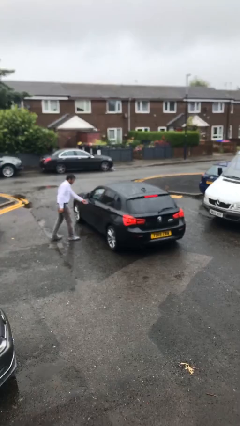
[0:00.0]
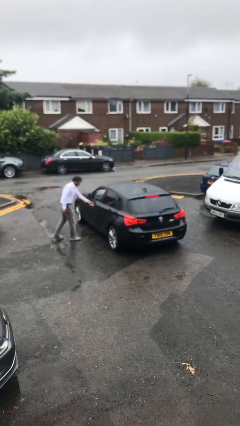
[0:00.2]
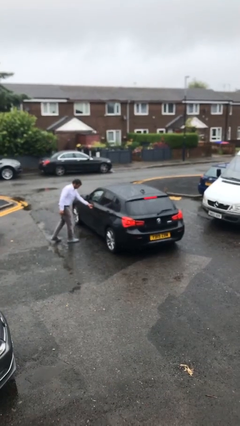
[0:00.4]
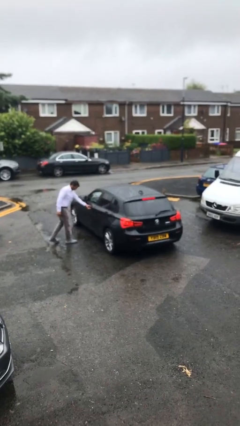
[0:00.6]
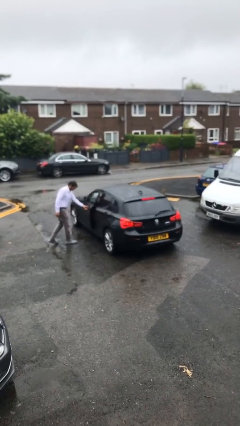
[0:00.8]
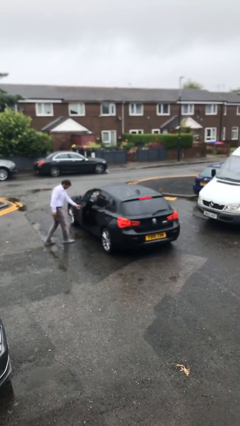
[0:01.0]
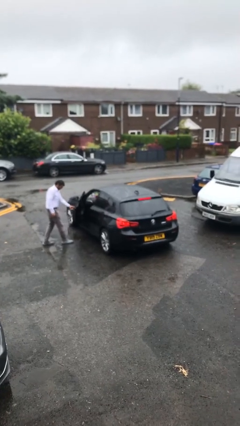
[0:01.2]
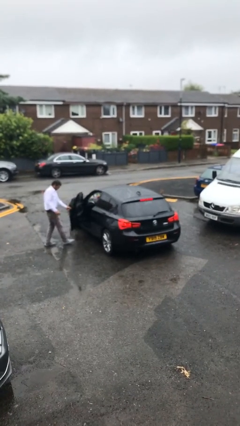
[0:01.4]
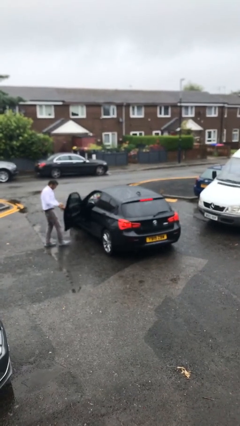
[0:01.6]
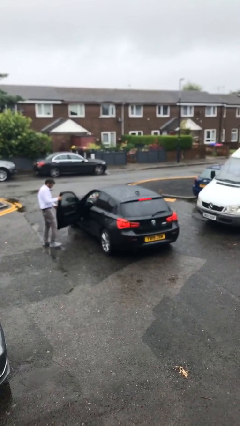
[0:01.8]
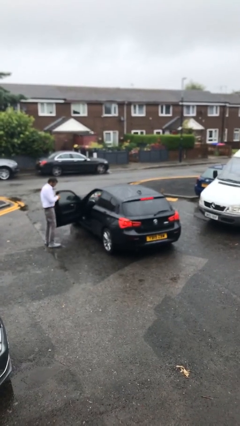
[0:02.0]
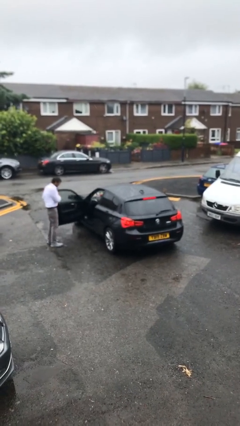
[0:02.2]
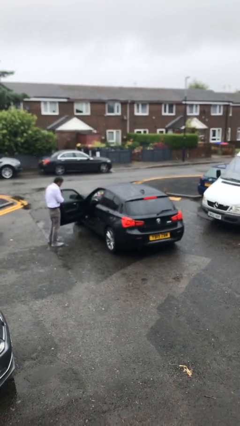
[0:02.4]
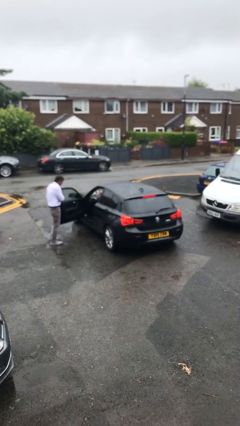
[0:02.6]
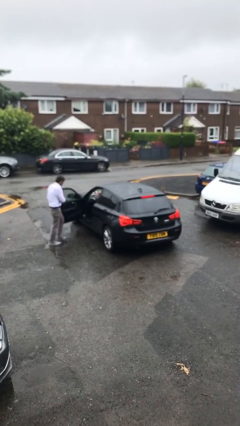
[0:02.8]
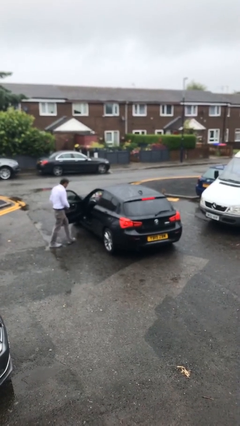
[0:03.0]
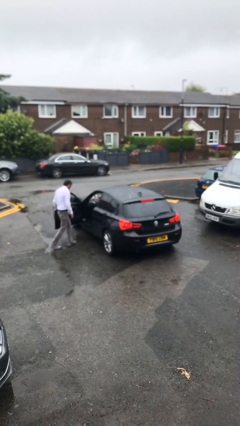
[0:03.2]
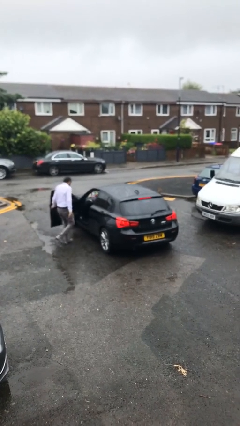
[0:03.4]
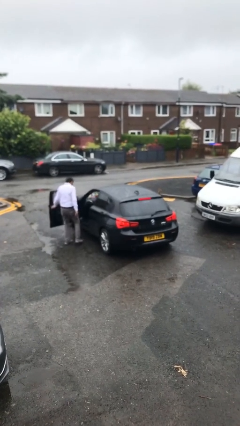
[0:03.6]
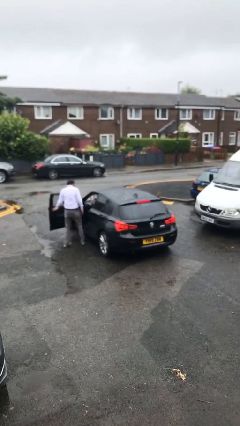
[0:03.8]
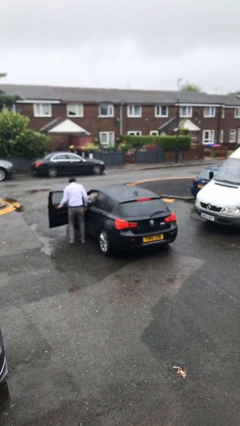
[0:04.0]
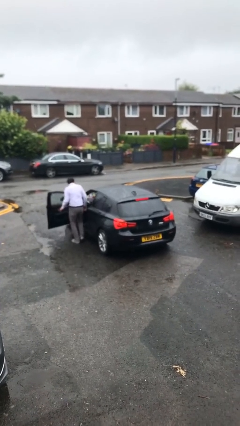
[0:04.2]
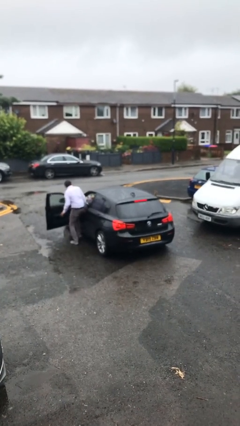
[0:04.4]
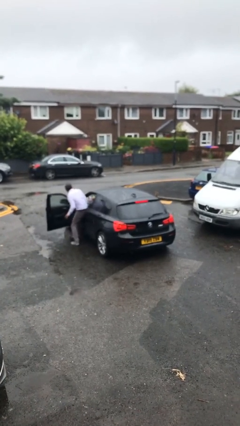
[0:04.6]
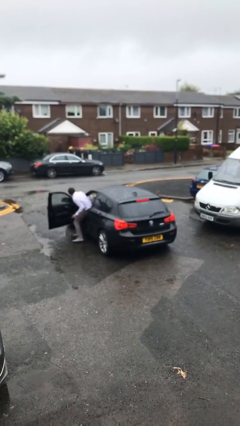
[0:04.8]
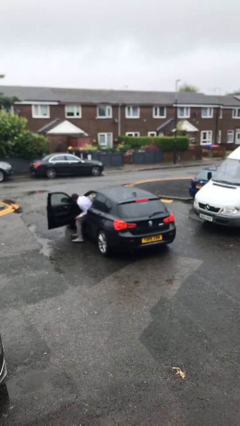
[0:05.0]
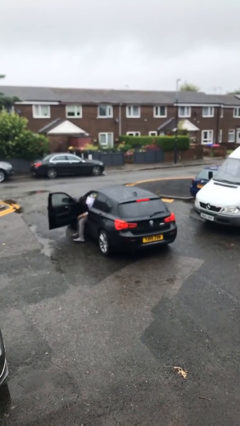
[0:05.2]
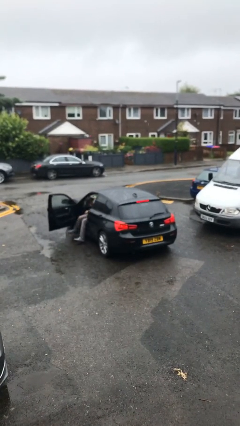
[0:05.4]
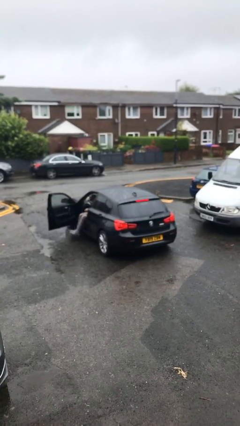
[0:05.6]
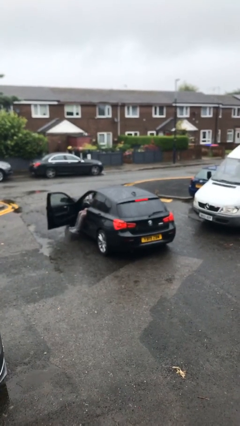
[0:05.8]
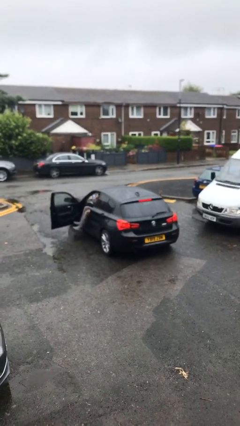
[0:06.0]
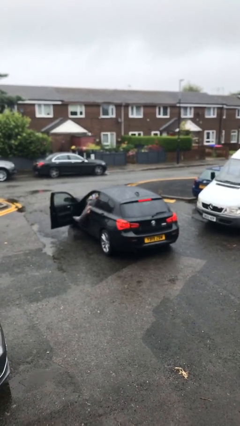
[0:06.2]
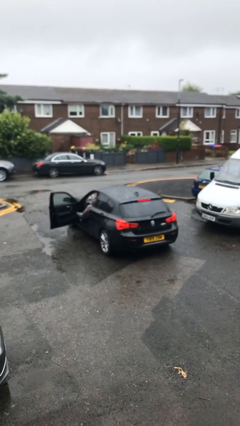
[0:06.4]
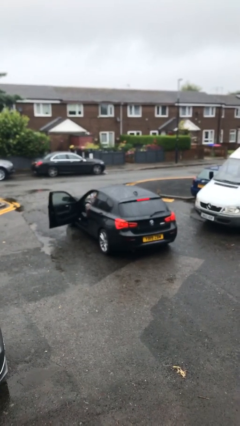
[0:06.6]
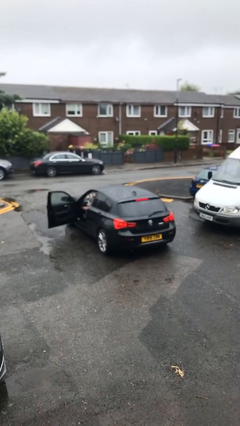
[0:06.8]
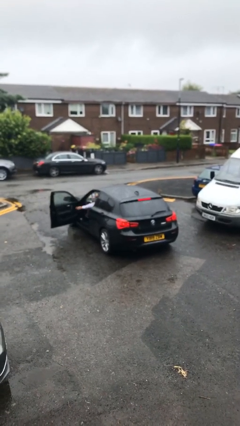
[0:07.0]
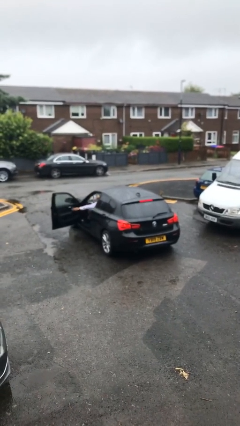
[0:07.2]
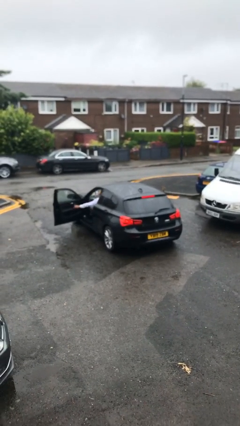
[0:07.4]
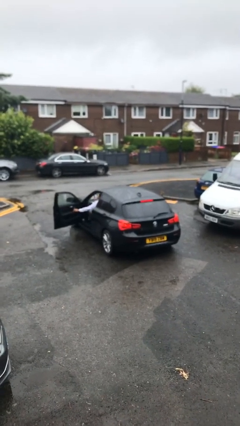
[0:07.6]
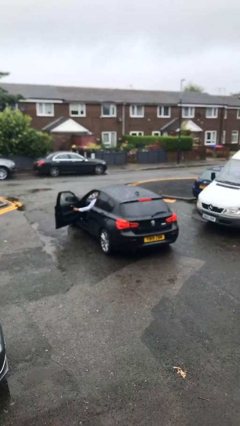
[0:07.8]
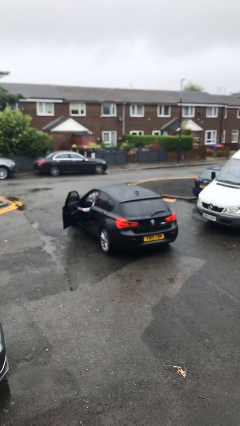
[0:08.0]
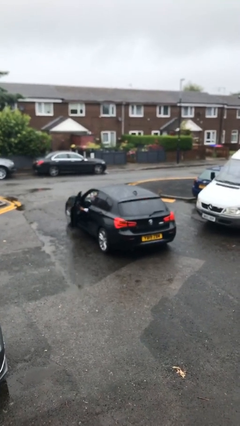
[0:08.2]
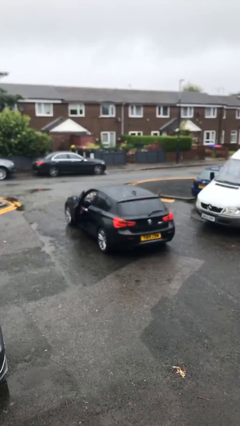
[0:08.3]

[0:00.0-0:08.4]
car picks up person

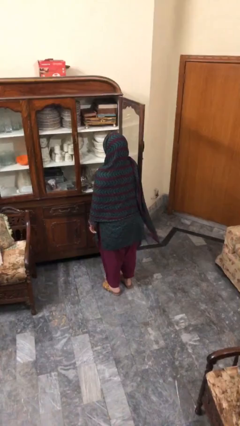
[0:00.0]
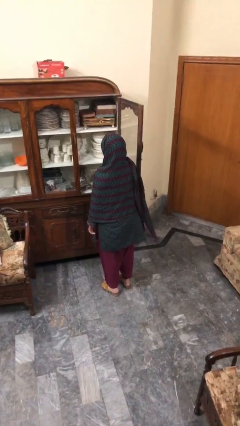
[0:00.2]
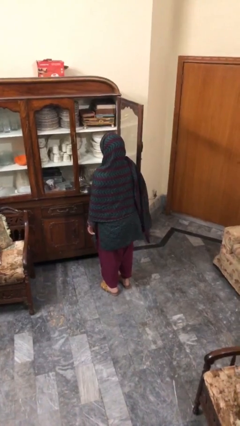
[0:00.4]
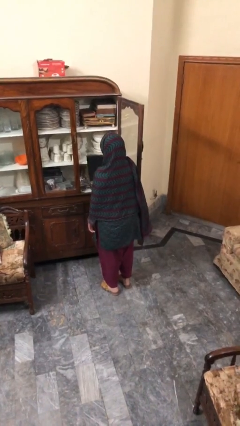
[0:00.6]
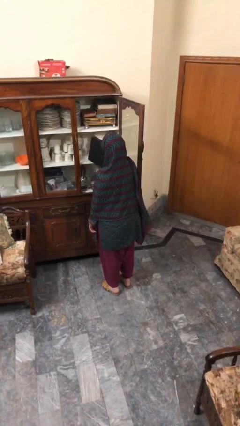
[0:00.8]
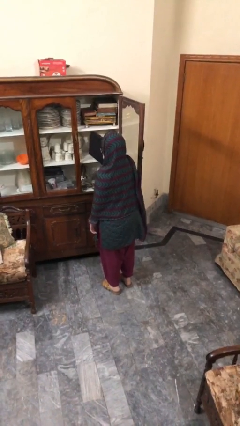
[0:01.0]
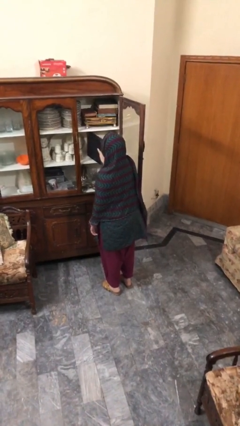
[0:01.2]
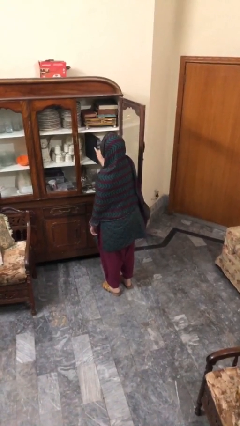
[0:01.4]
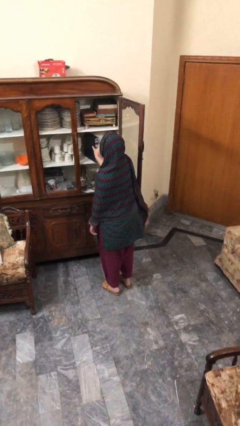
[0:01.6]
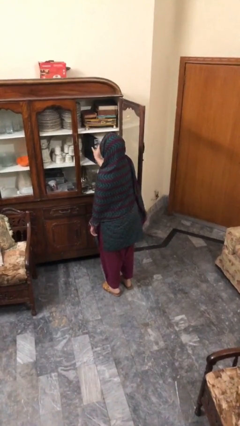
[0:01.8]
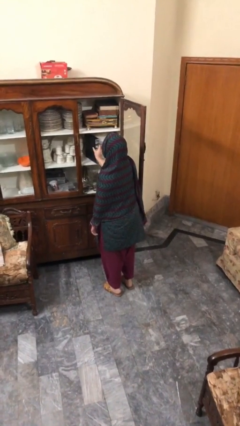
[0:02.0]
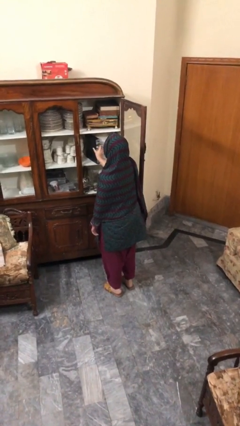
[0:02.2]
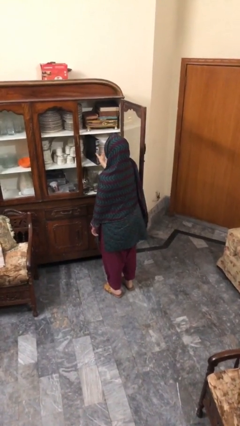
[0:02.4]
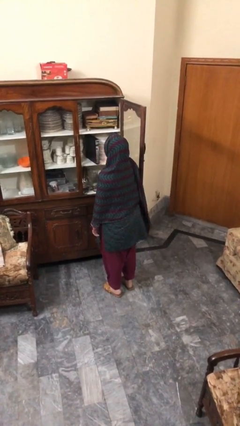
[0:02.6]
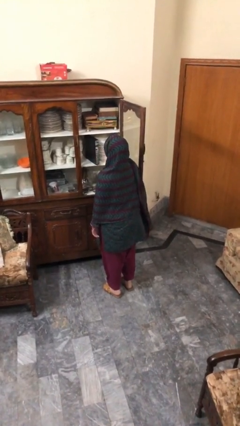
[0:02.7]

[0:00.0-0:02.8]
person puts down object into cabinet

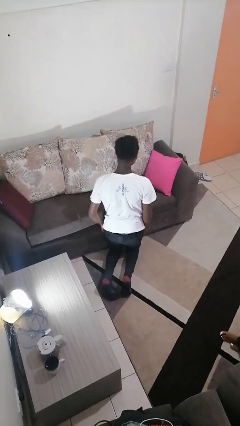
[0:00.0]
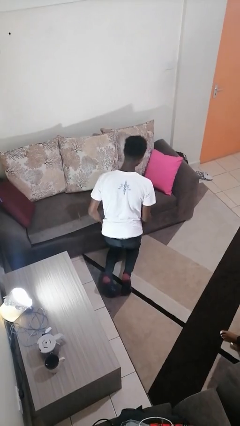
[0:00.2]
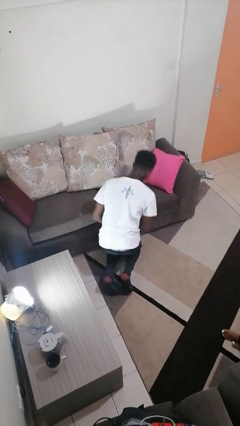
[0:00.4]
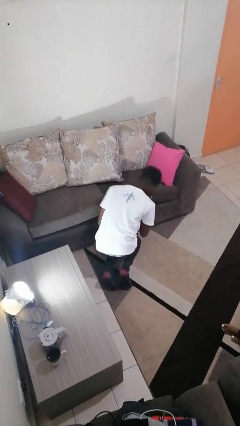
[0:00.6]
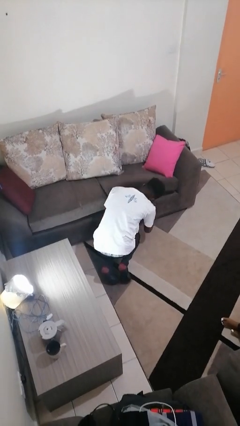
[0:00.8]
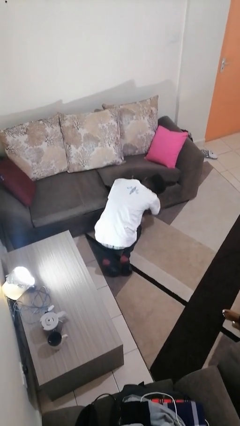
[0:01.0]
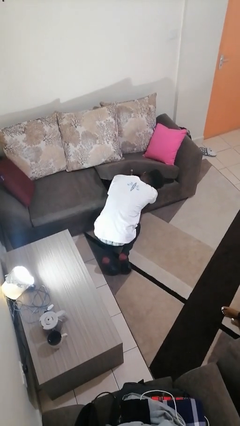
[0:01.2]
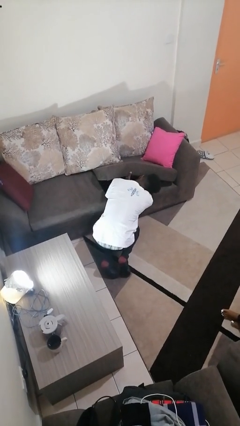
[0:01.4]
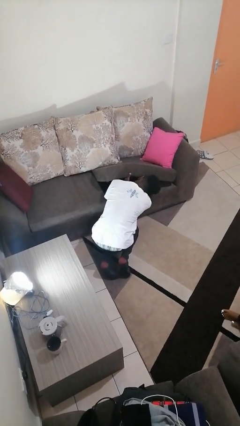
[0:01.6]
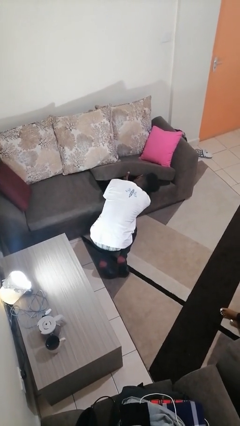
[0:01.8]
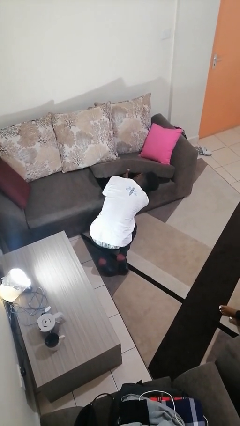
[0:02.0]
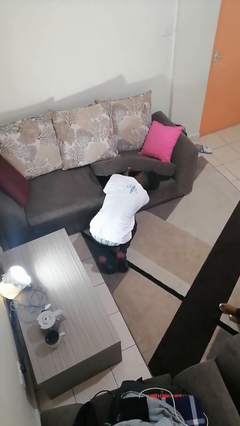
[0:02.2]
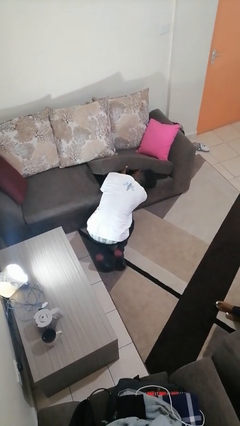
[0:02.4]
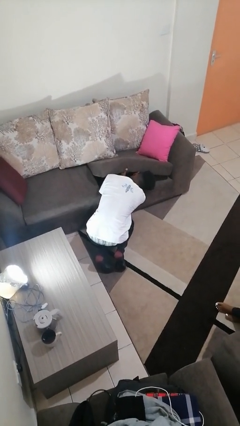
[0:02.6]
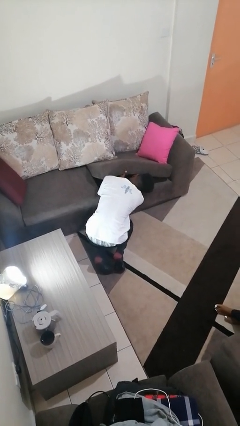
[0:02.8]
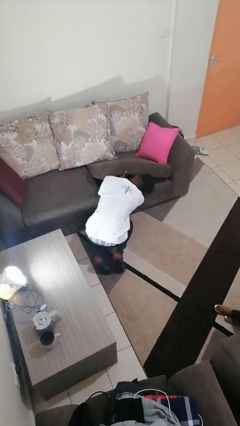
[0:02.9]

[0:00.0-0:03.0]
person searches under couch

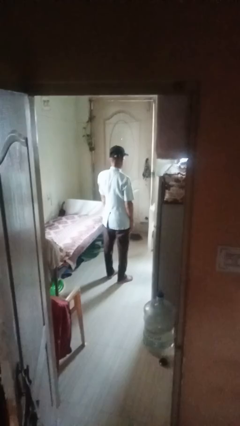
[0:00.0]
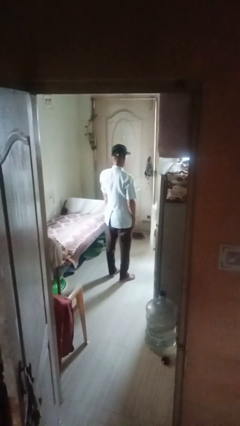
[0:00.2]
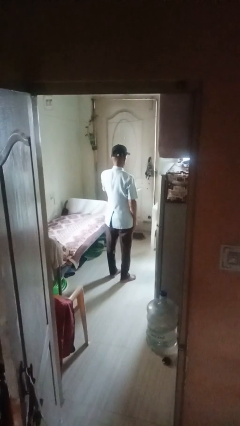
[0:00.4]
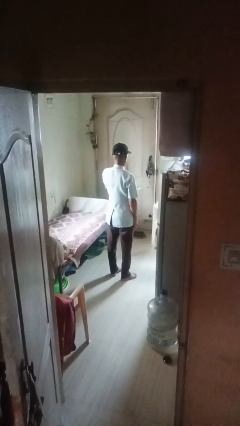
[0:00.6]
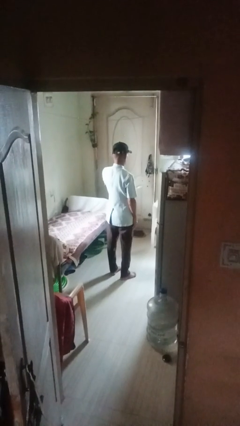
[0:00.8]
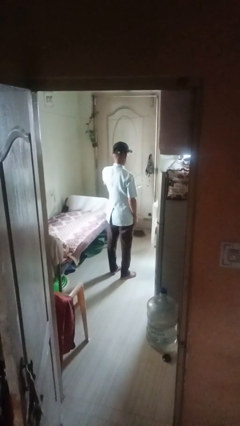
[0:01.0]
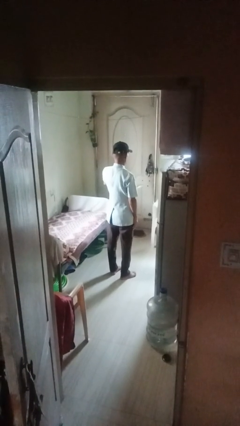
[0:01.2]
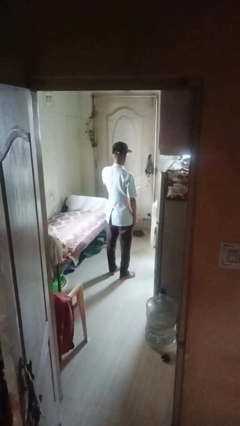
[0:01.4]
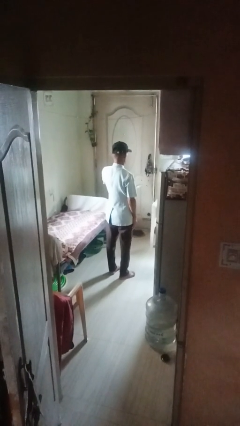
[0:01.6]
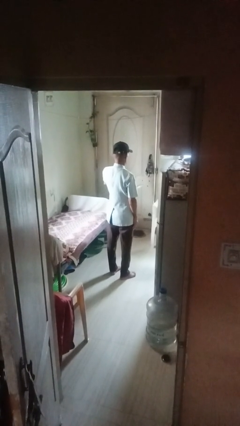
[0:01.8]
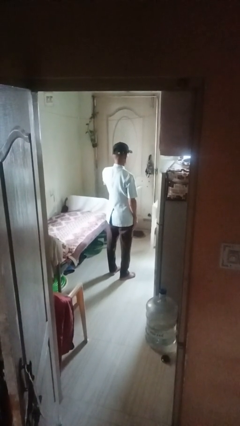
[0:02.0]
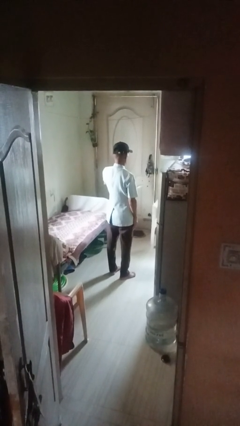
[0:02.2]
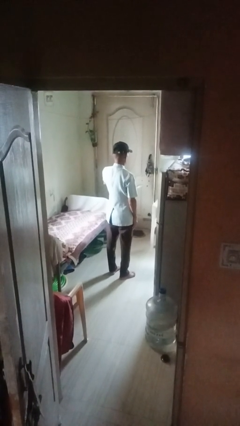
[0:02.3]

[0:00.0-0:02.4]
person gestures stop

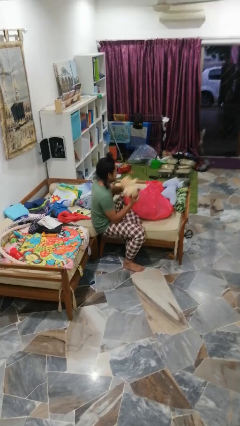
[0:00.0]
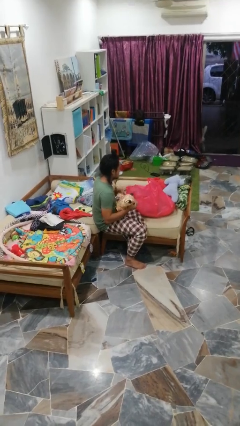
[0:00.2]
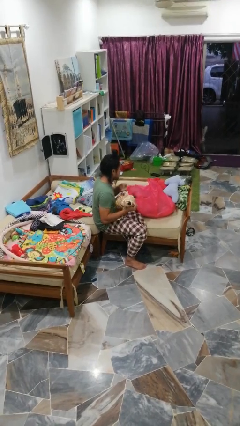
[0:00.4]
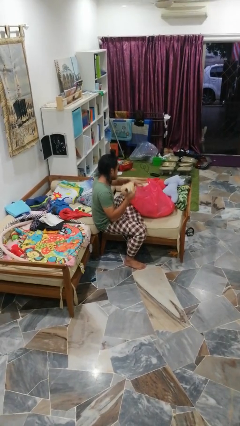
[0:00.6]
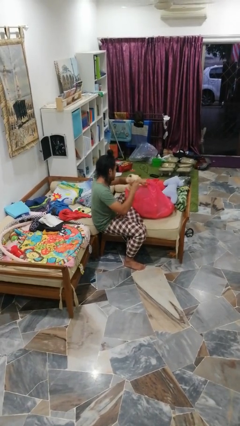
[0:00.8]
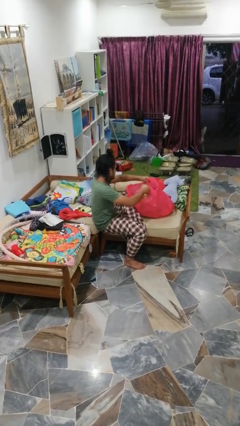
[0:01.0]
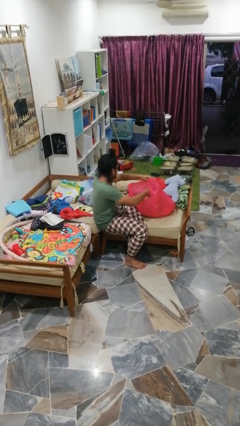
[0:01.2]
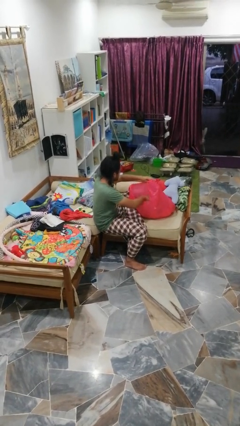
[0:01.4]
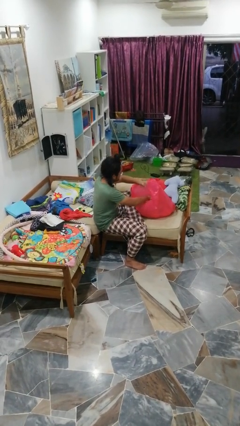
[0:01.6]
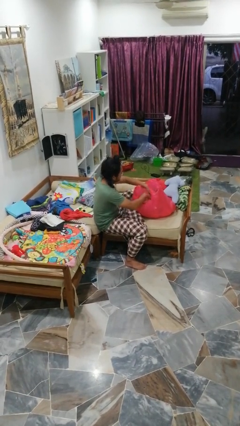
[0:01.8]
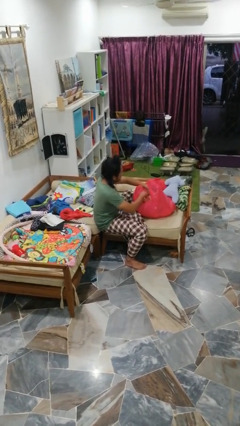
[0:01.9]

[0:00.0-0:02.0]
person puts object into bag
